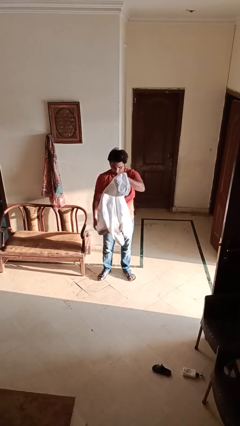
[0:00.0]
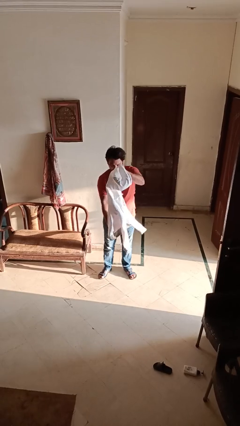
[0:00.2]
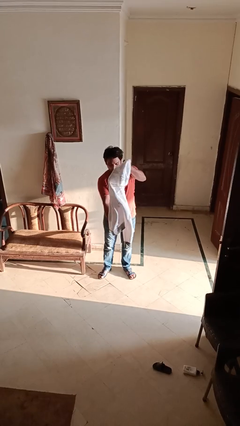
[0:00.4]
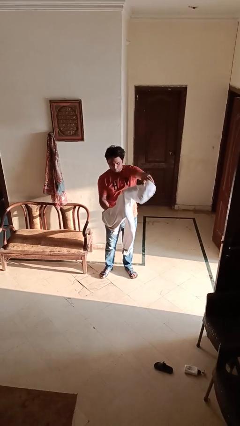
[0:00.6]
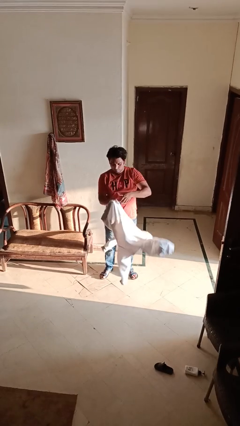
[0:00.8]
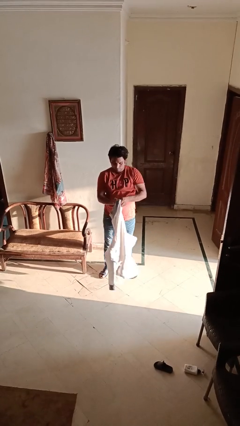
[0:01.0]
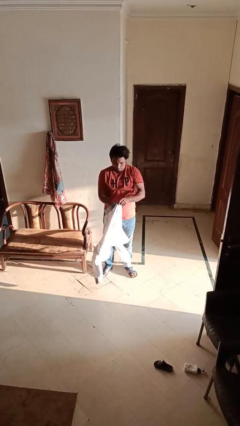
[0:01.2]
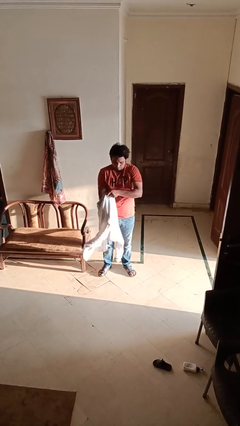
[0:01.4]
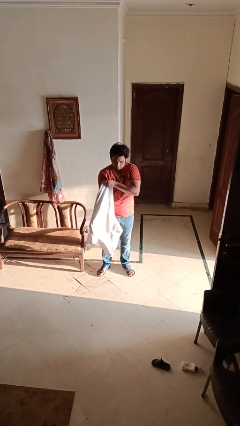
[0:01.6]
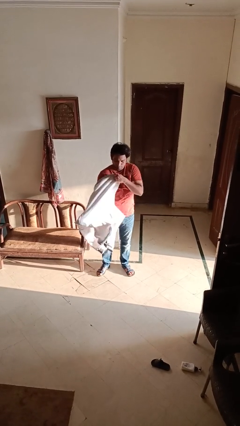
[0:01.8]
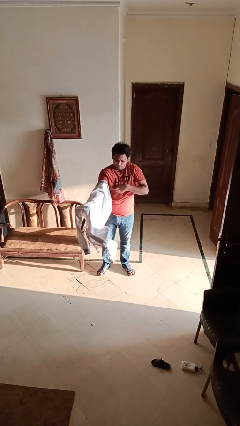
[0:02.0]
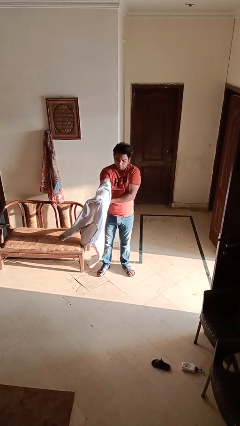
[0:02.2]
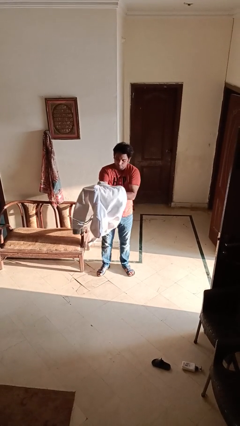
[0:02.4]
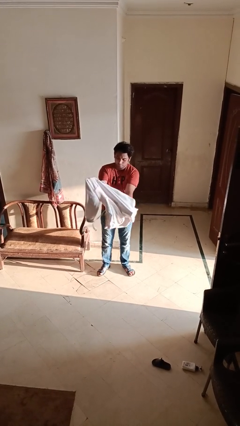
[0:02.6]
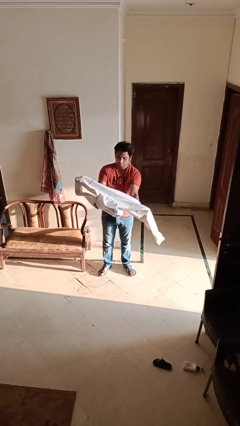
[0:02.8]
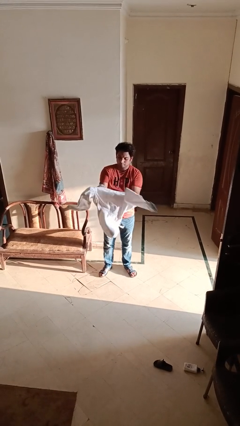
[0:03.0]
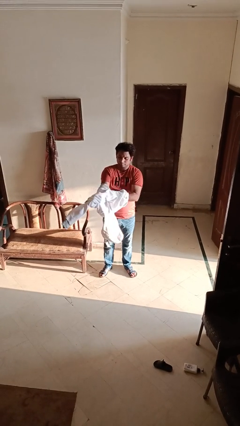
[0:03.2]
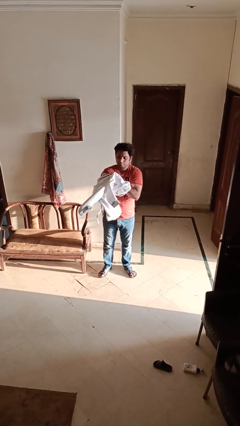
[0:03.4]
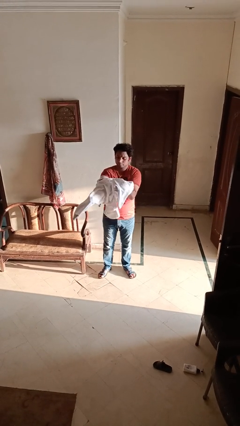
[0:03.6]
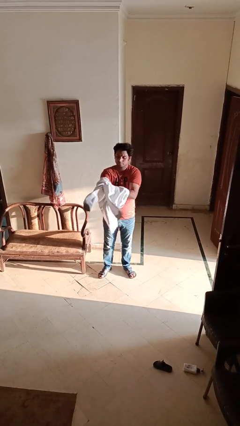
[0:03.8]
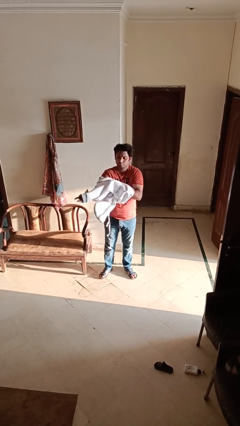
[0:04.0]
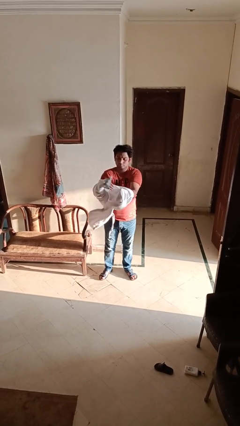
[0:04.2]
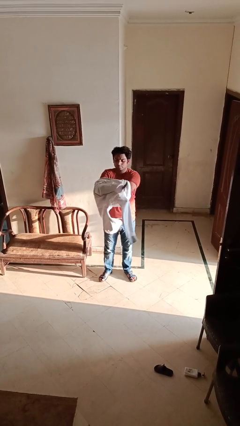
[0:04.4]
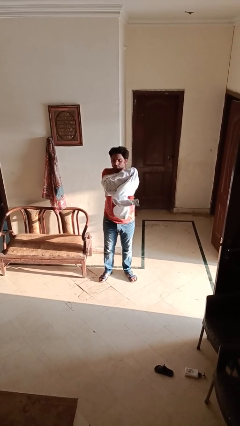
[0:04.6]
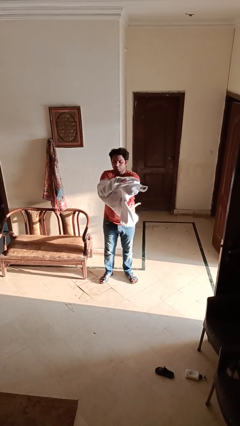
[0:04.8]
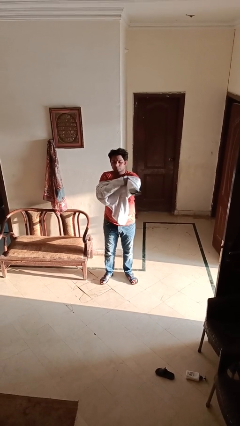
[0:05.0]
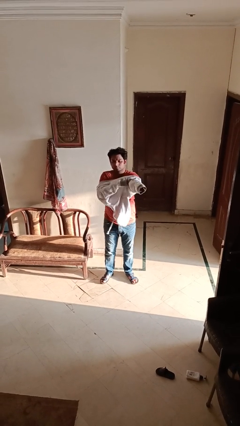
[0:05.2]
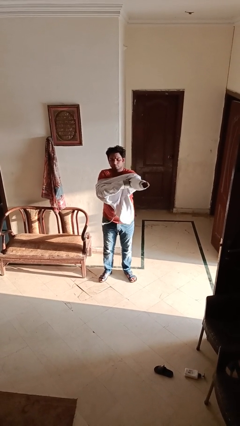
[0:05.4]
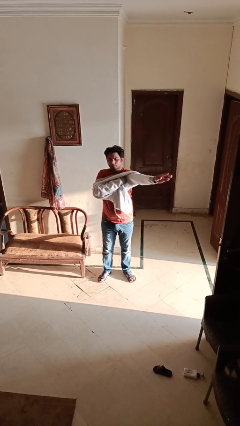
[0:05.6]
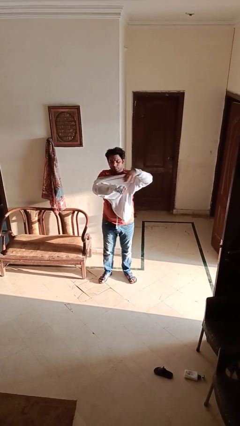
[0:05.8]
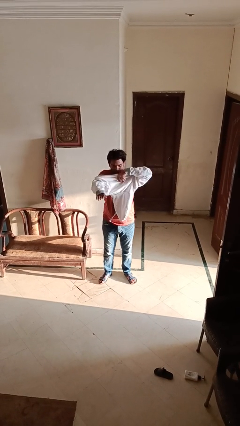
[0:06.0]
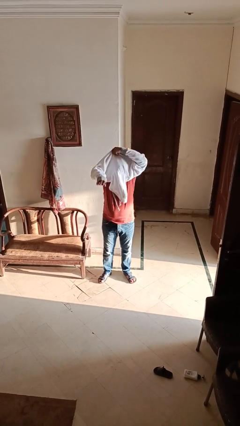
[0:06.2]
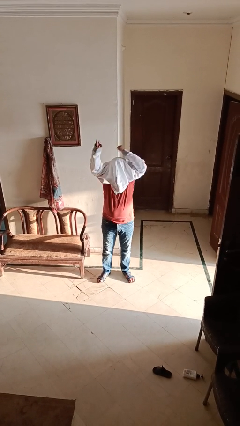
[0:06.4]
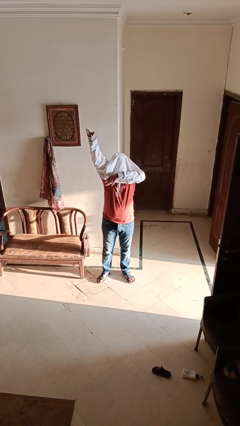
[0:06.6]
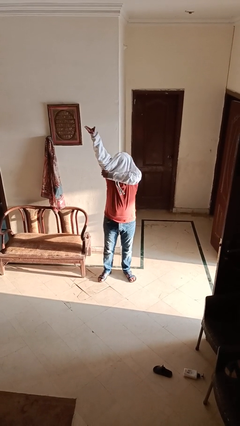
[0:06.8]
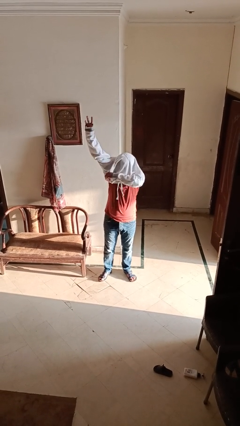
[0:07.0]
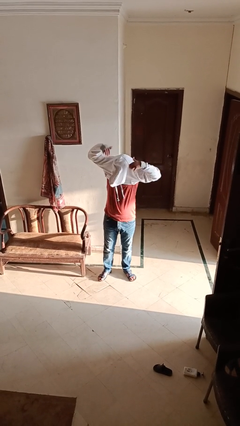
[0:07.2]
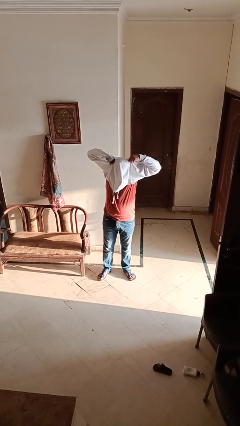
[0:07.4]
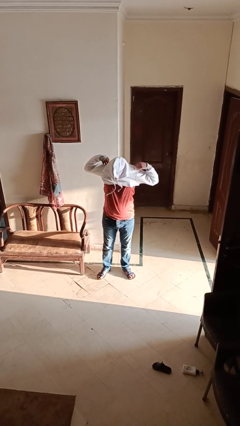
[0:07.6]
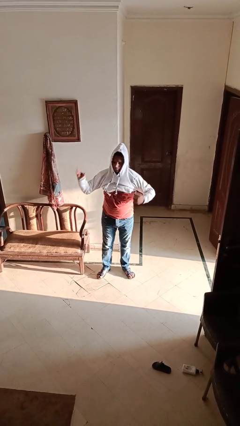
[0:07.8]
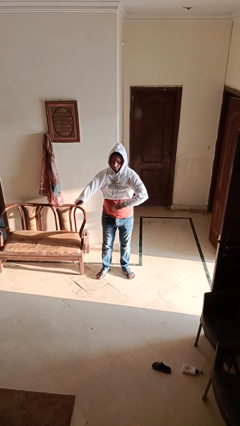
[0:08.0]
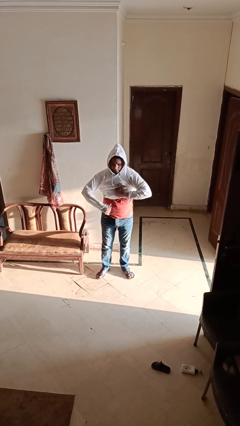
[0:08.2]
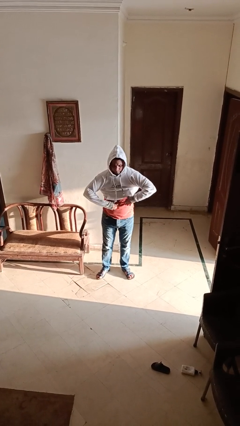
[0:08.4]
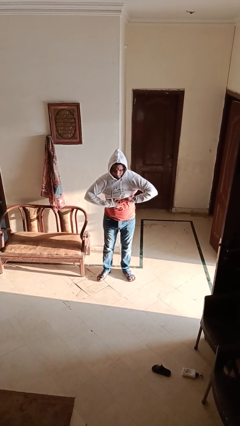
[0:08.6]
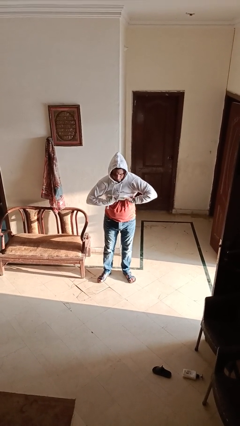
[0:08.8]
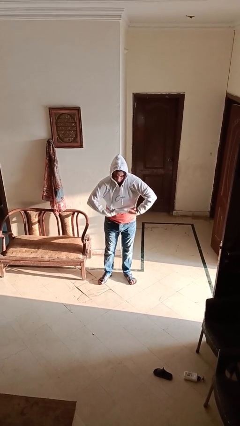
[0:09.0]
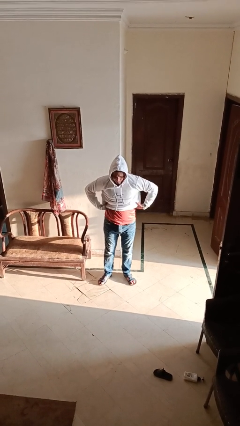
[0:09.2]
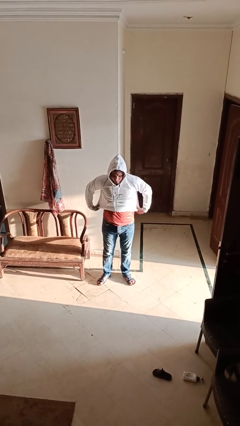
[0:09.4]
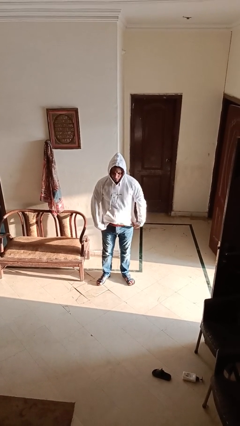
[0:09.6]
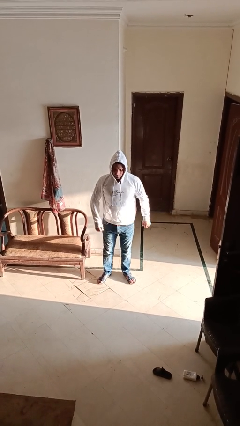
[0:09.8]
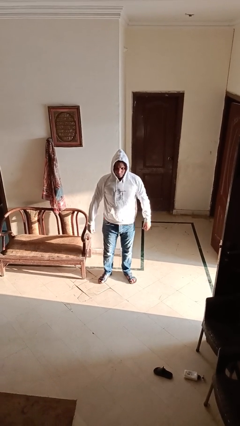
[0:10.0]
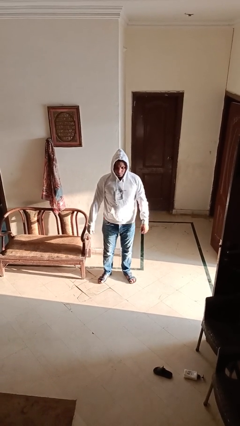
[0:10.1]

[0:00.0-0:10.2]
person puts on hoodie

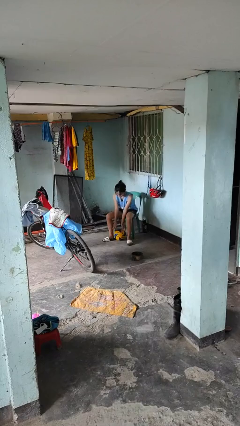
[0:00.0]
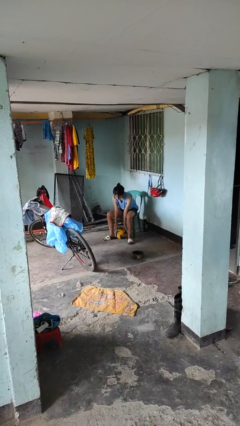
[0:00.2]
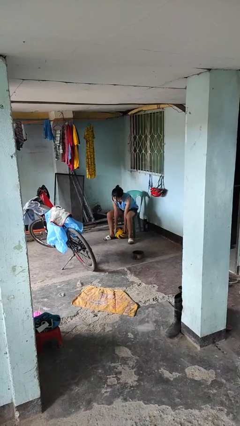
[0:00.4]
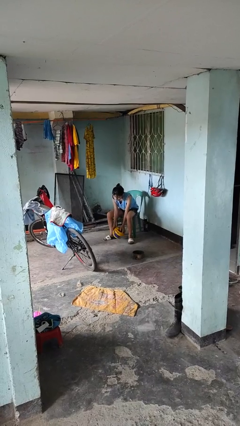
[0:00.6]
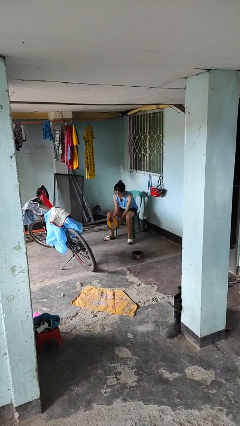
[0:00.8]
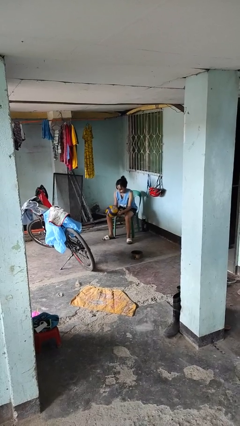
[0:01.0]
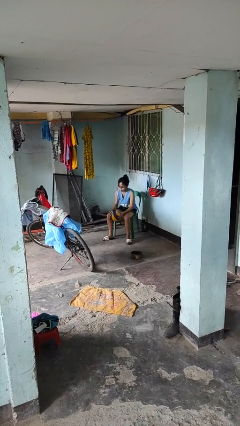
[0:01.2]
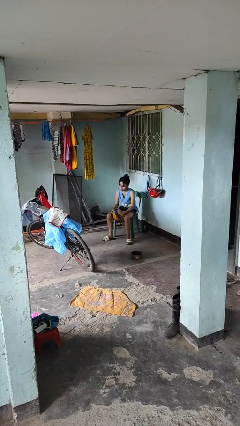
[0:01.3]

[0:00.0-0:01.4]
person picks up object from floor

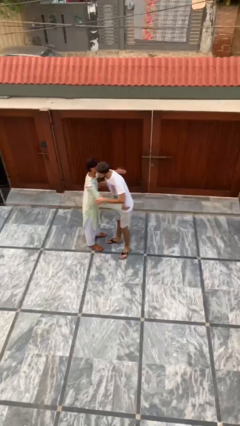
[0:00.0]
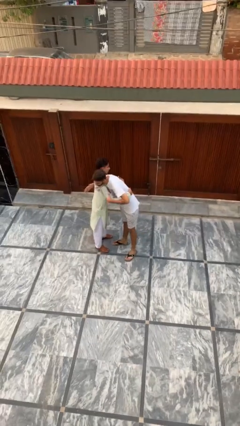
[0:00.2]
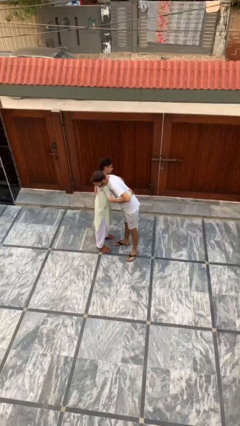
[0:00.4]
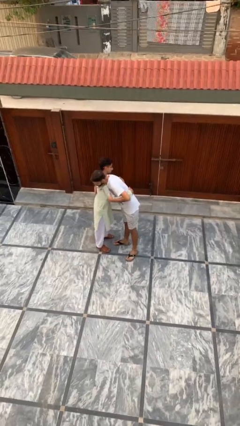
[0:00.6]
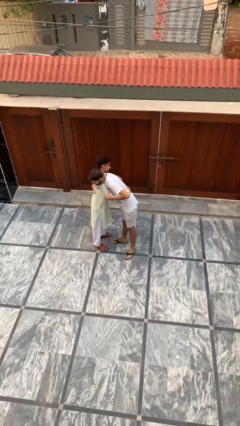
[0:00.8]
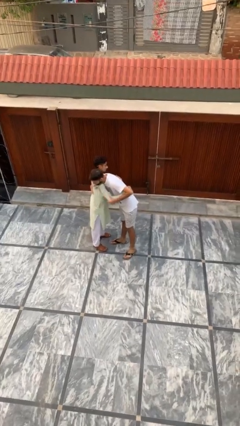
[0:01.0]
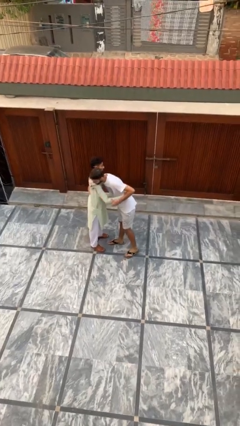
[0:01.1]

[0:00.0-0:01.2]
person embraces person

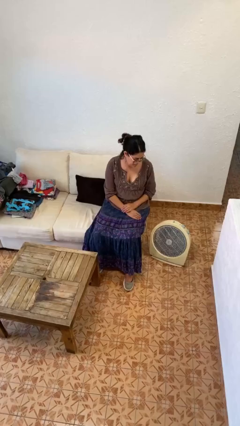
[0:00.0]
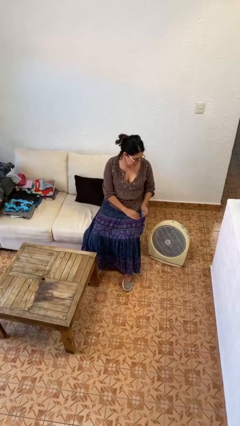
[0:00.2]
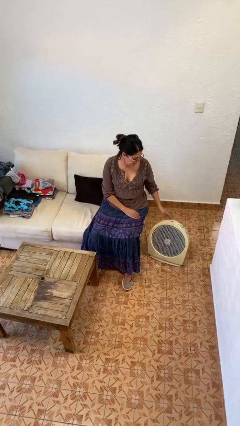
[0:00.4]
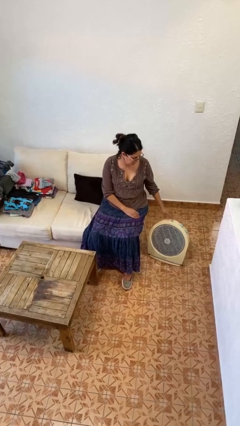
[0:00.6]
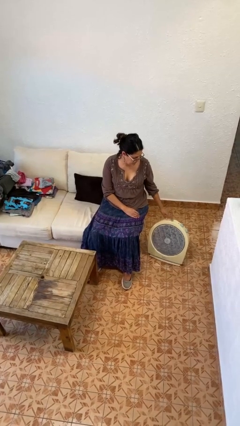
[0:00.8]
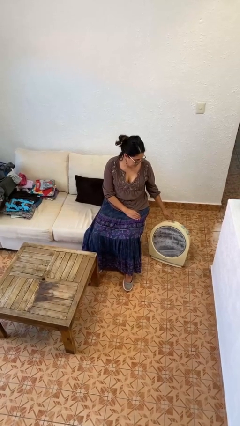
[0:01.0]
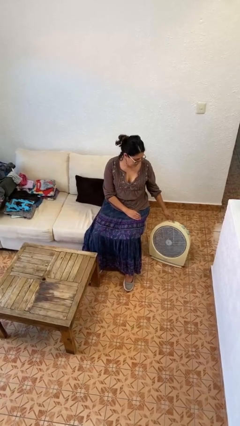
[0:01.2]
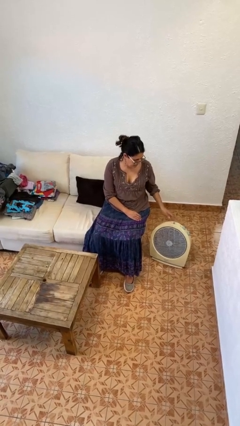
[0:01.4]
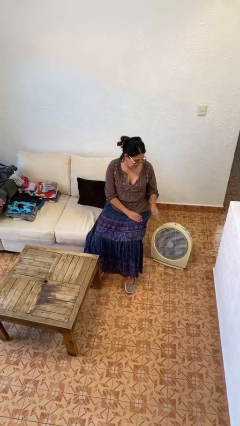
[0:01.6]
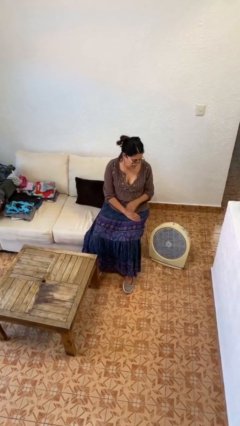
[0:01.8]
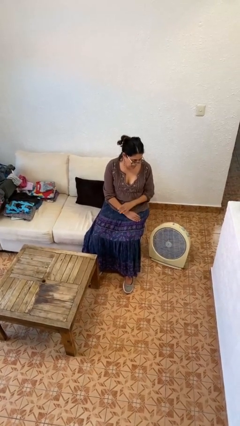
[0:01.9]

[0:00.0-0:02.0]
person turns off fan

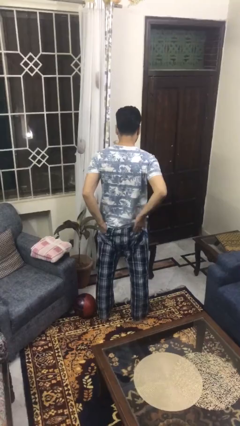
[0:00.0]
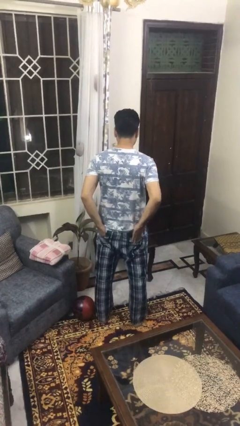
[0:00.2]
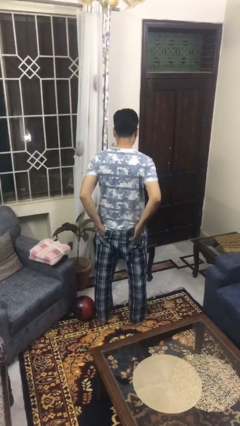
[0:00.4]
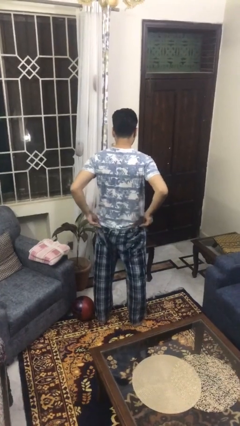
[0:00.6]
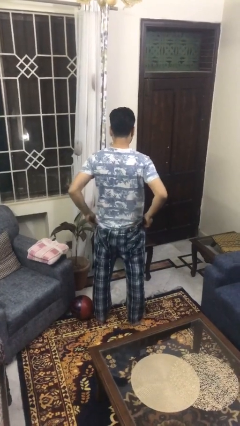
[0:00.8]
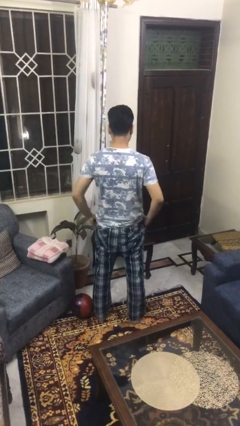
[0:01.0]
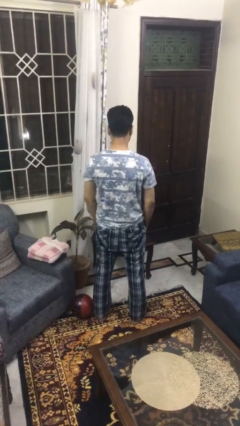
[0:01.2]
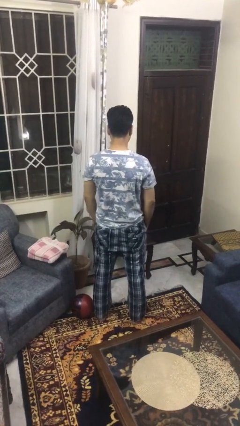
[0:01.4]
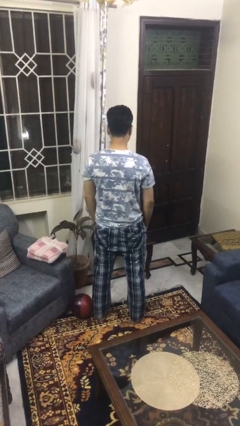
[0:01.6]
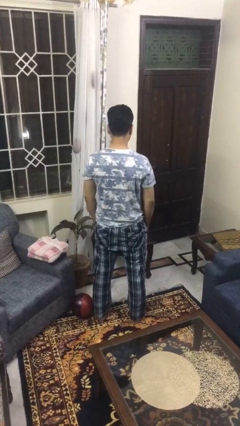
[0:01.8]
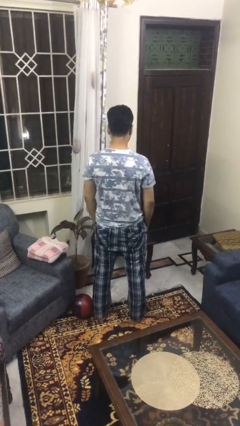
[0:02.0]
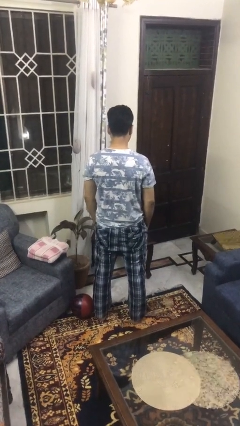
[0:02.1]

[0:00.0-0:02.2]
person puts hands in back pockets

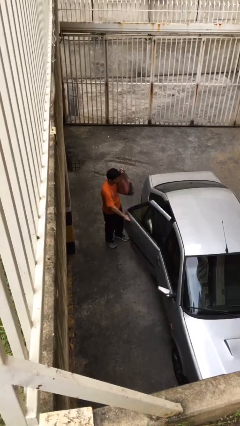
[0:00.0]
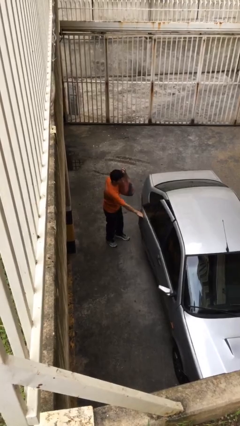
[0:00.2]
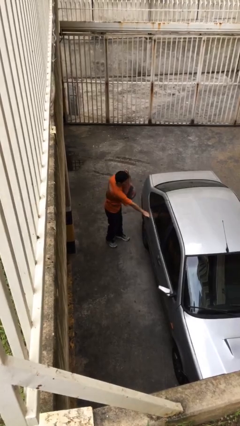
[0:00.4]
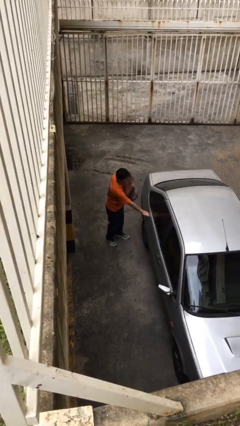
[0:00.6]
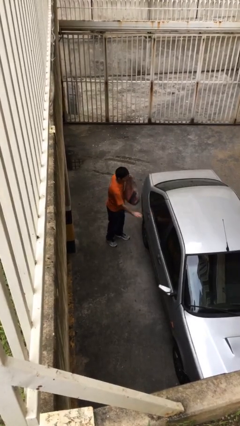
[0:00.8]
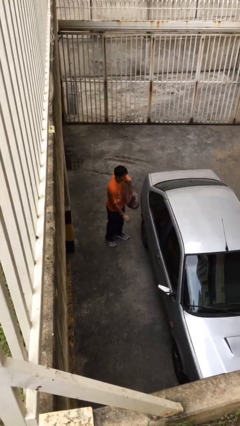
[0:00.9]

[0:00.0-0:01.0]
person closes car door
